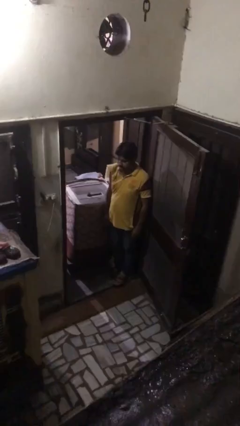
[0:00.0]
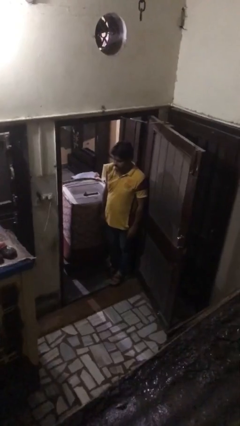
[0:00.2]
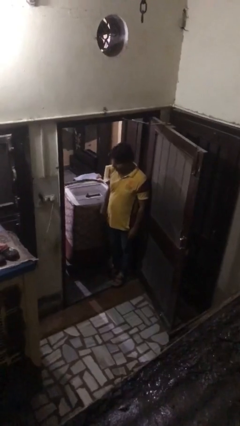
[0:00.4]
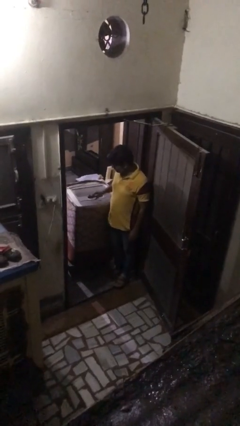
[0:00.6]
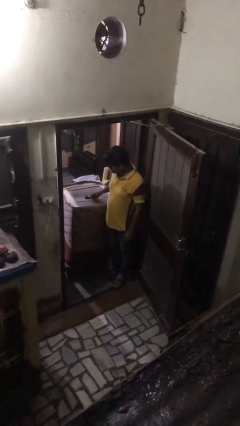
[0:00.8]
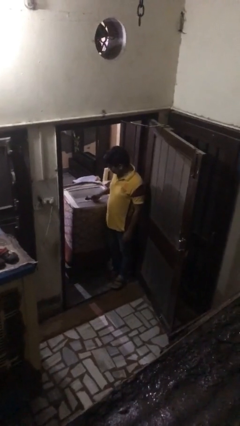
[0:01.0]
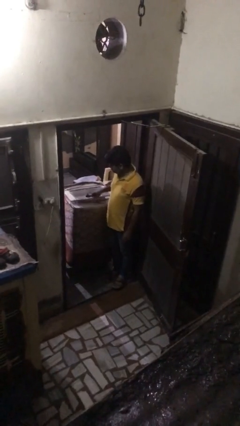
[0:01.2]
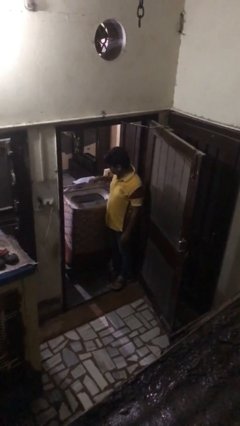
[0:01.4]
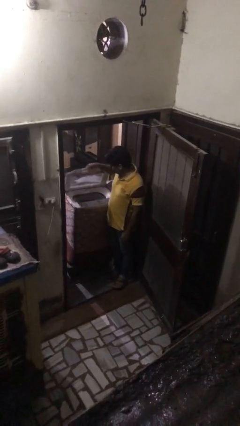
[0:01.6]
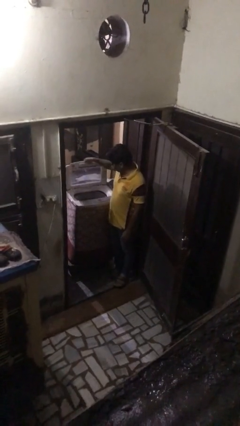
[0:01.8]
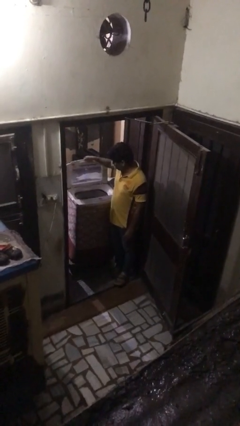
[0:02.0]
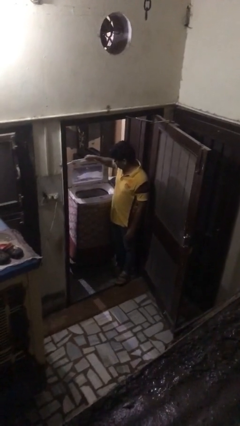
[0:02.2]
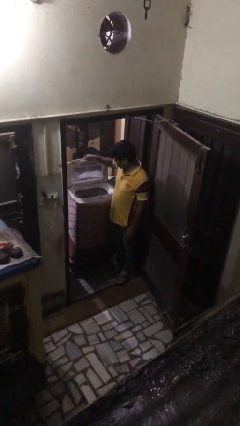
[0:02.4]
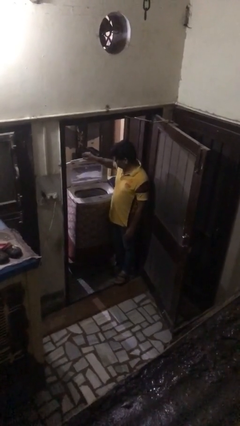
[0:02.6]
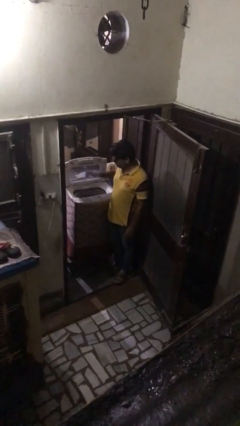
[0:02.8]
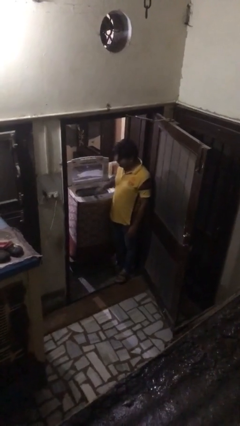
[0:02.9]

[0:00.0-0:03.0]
person opens clothes washer

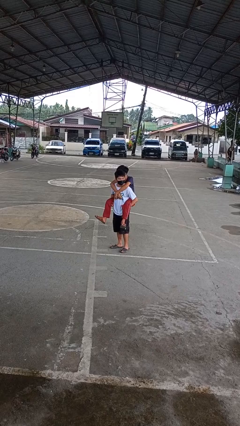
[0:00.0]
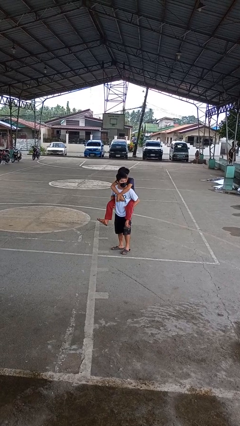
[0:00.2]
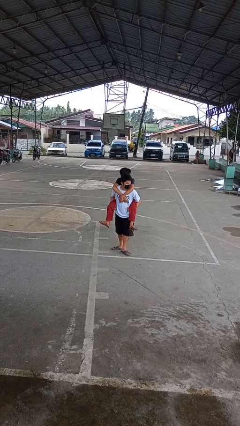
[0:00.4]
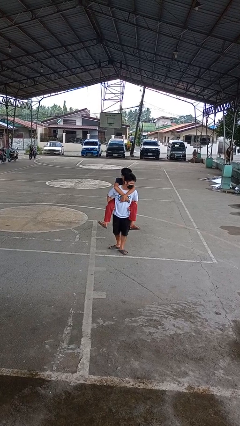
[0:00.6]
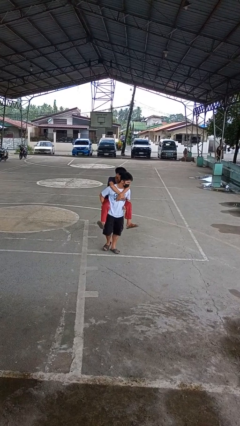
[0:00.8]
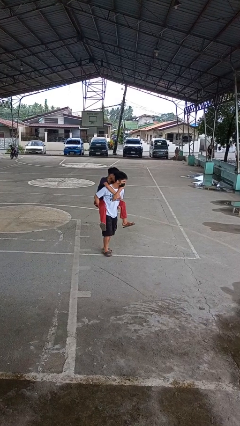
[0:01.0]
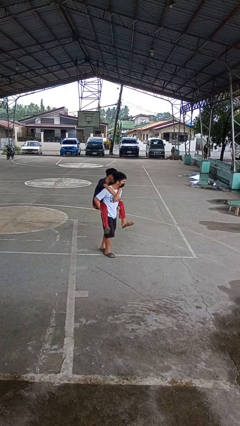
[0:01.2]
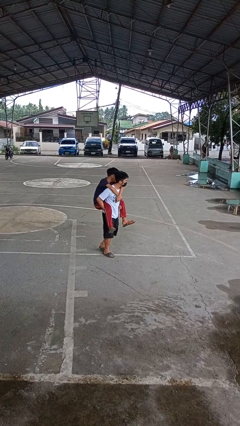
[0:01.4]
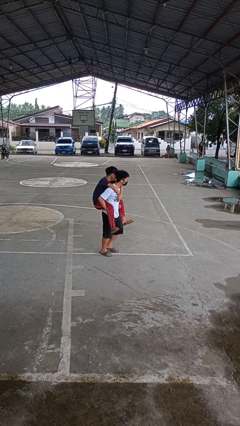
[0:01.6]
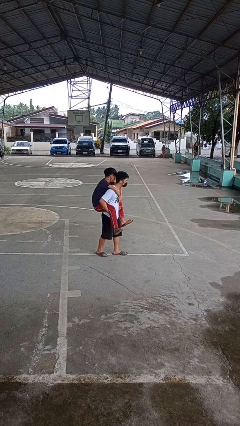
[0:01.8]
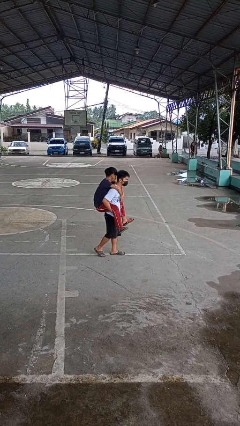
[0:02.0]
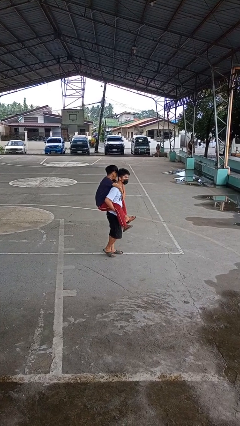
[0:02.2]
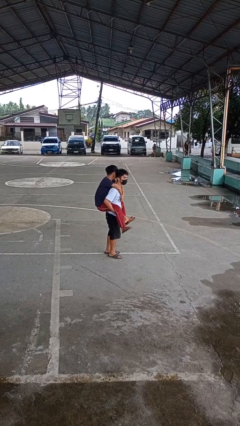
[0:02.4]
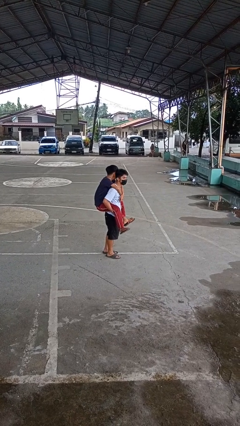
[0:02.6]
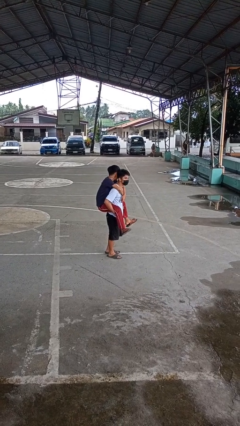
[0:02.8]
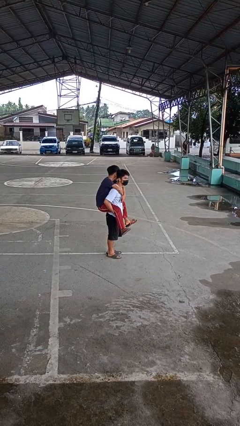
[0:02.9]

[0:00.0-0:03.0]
person carries person on back

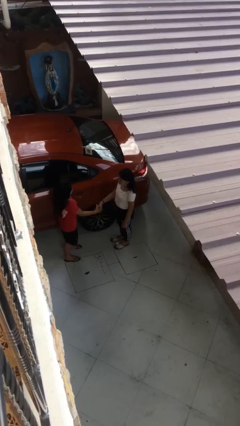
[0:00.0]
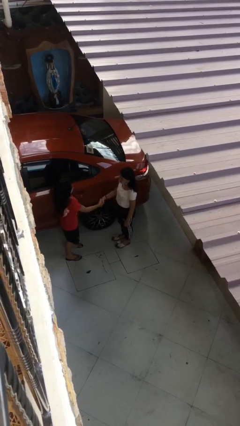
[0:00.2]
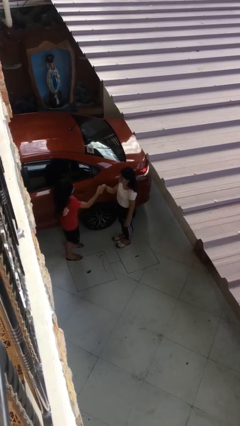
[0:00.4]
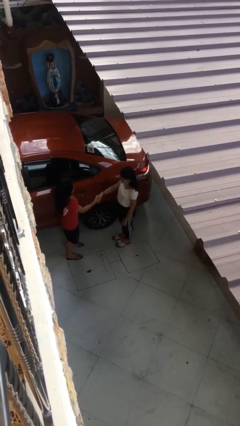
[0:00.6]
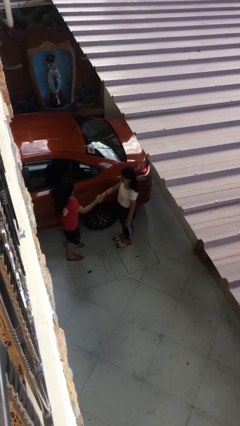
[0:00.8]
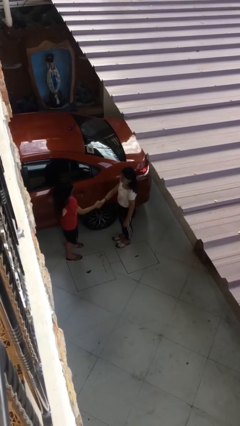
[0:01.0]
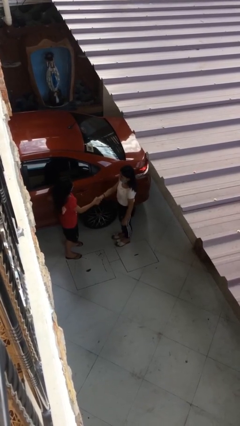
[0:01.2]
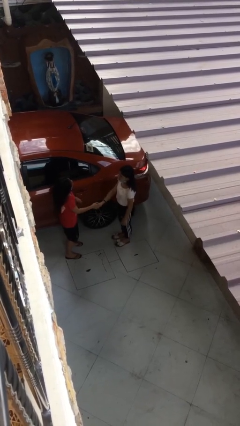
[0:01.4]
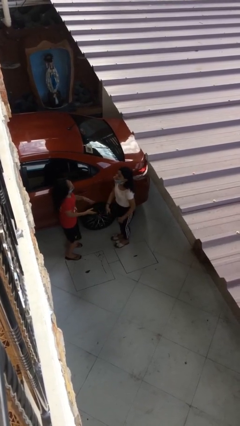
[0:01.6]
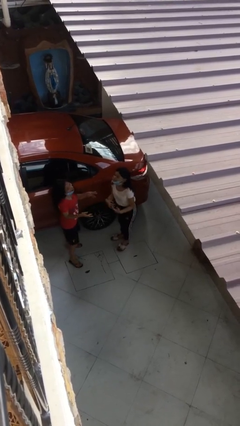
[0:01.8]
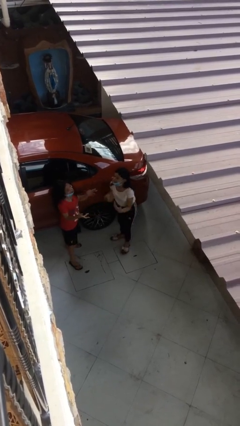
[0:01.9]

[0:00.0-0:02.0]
person shakes hand

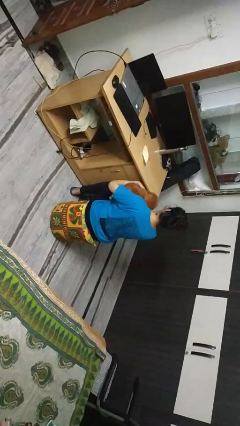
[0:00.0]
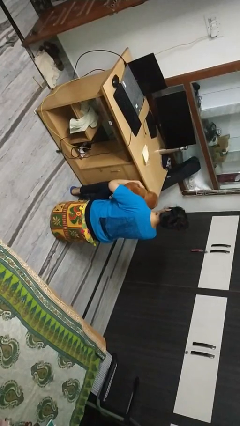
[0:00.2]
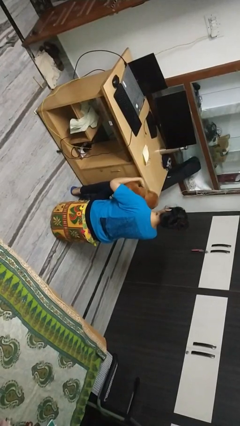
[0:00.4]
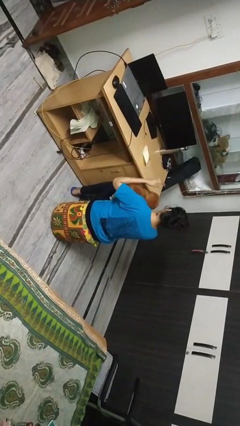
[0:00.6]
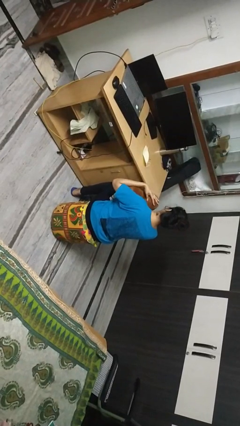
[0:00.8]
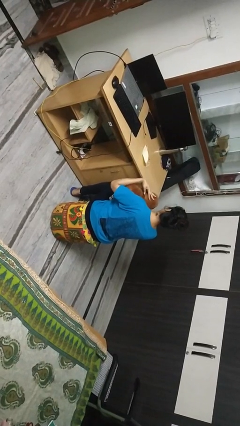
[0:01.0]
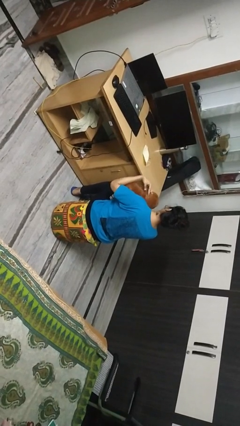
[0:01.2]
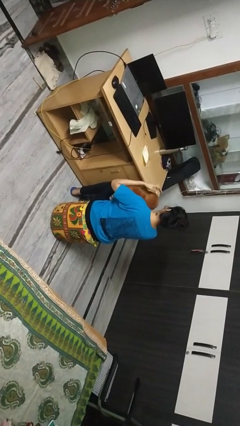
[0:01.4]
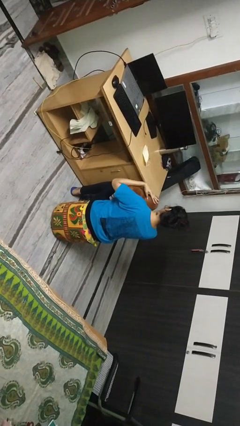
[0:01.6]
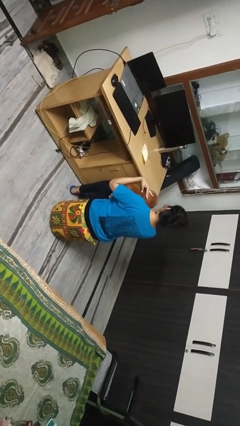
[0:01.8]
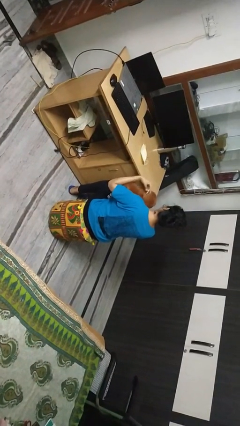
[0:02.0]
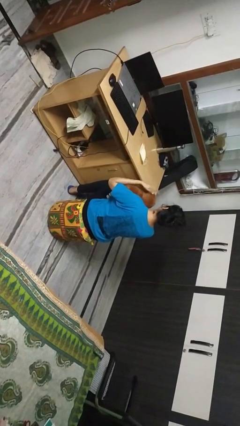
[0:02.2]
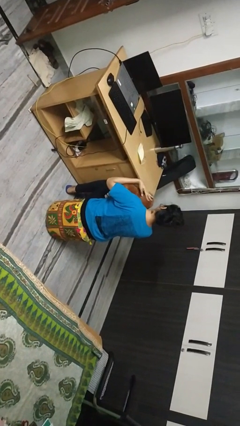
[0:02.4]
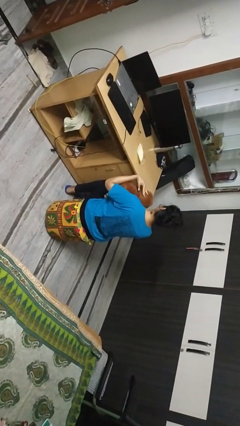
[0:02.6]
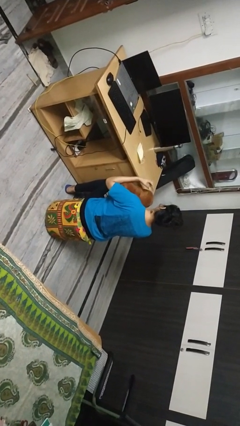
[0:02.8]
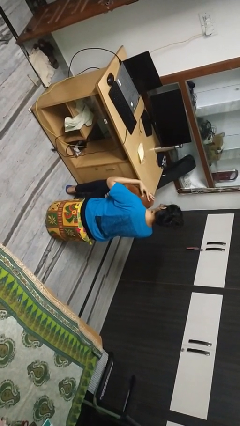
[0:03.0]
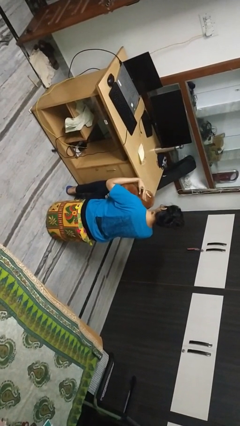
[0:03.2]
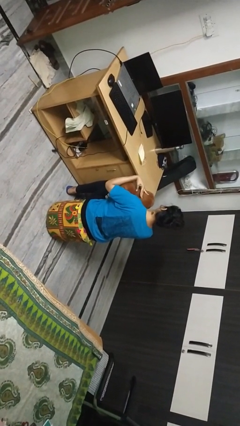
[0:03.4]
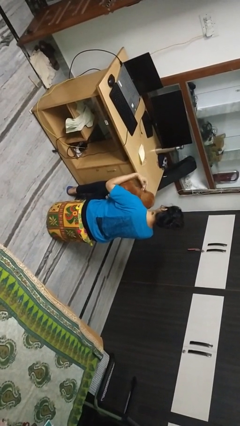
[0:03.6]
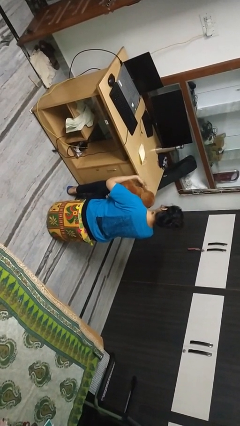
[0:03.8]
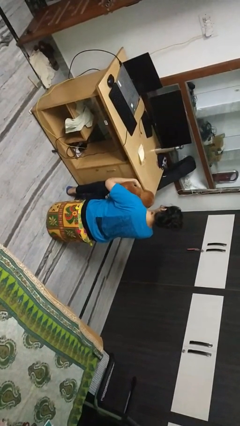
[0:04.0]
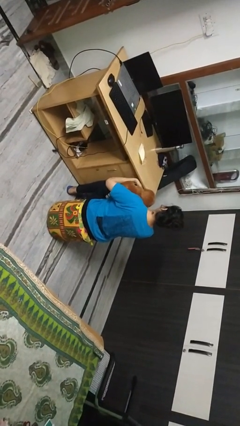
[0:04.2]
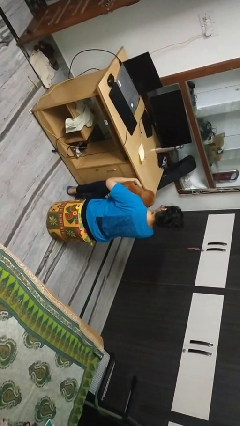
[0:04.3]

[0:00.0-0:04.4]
person pets dog

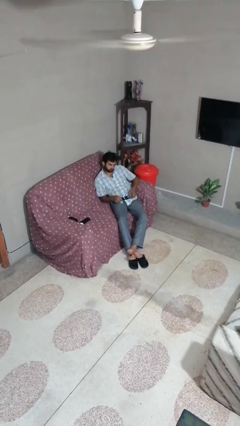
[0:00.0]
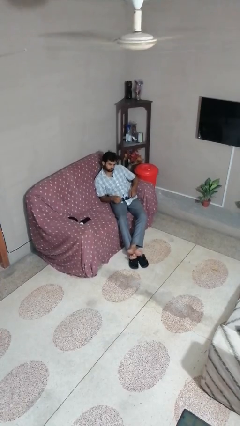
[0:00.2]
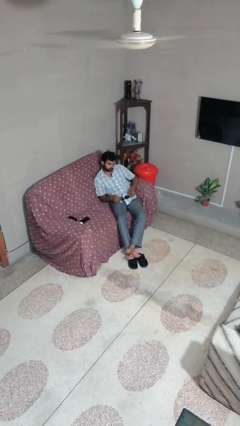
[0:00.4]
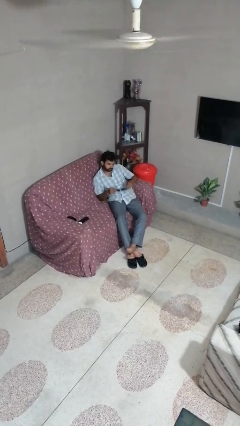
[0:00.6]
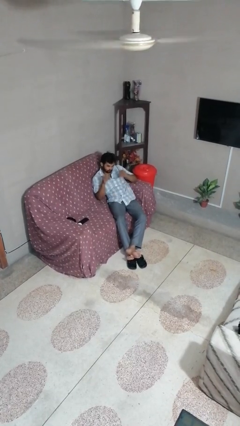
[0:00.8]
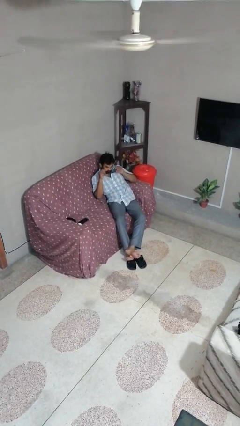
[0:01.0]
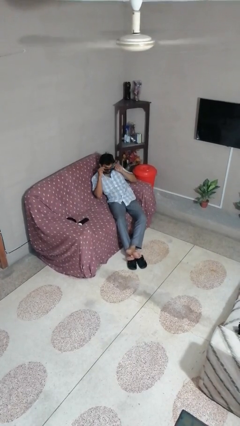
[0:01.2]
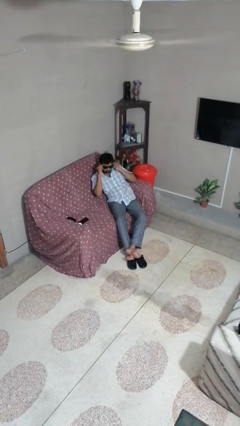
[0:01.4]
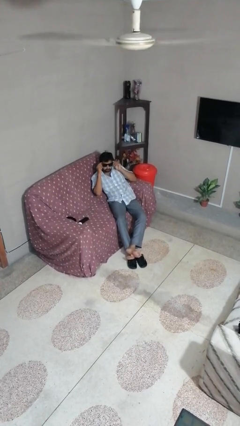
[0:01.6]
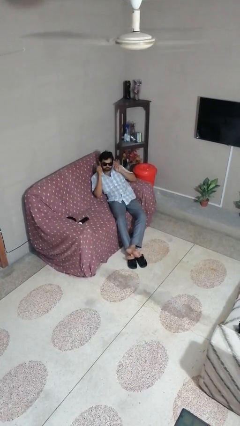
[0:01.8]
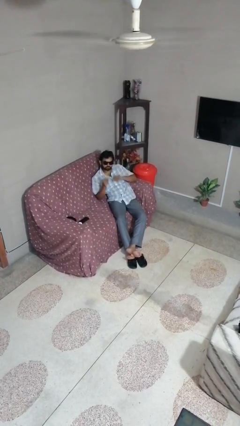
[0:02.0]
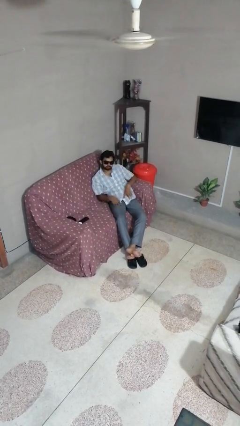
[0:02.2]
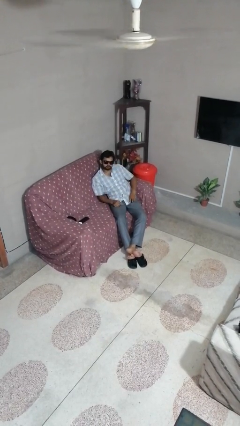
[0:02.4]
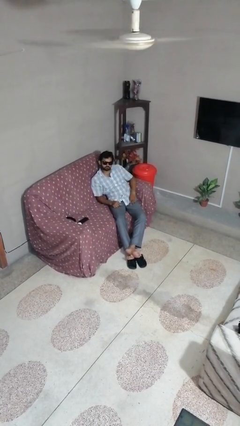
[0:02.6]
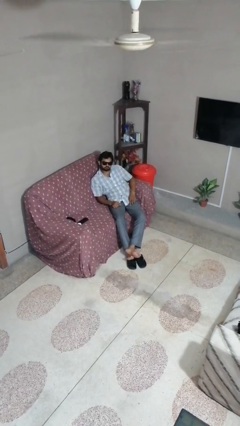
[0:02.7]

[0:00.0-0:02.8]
person puts on sunglasses

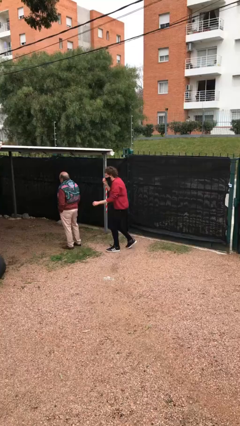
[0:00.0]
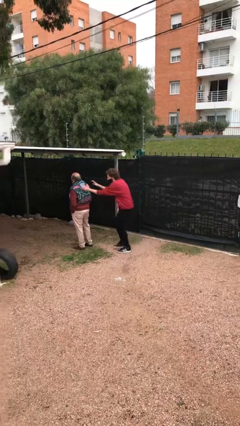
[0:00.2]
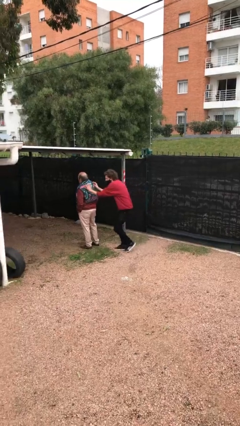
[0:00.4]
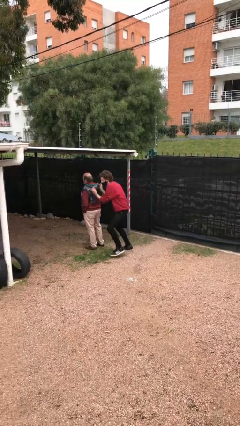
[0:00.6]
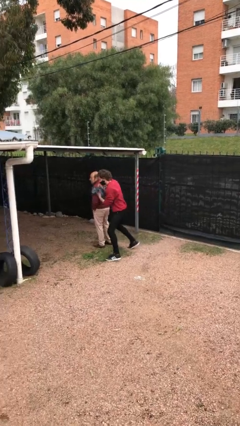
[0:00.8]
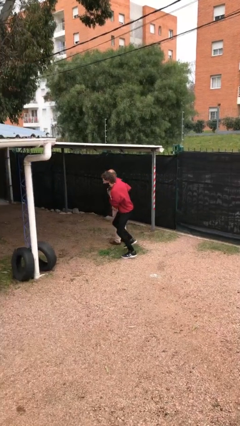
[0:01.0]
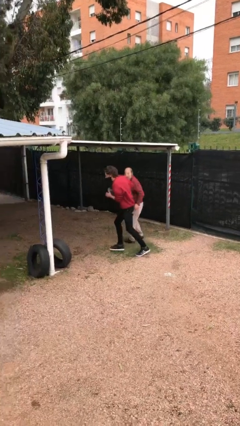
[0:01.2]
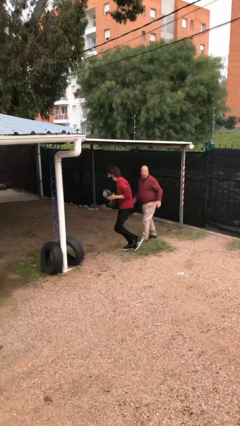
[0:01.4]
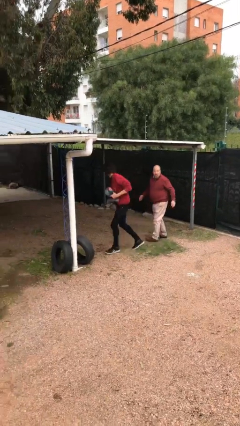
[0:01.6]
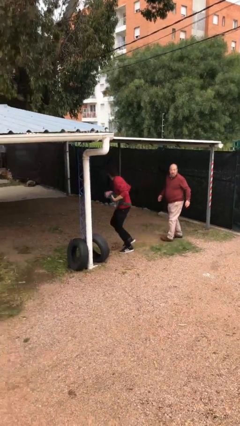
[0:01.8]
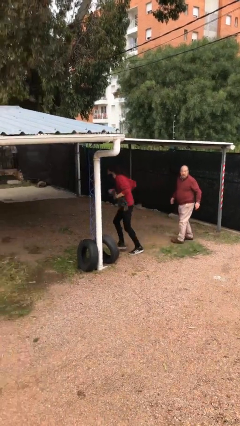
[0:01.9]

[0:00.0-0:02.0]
person steals object from person
